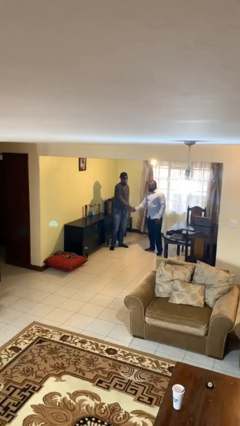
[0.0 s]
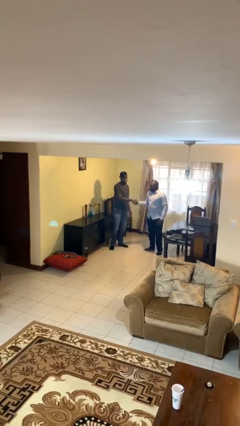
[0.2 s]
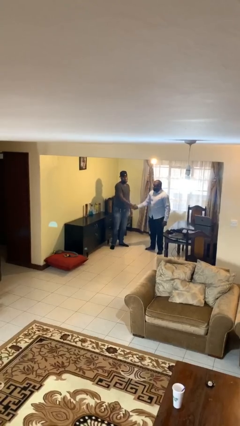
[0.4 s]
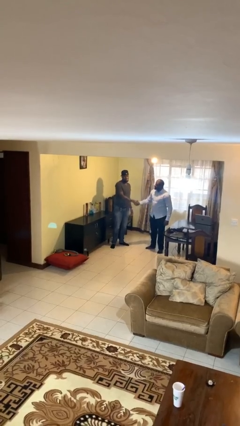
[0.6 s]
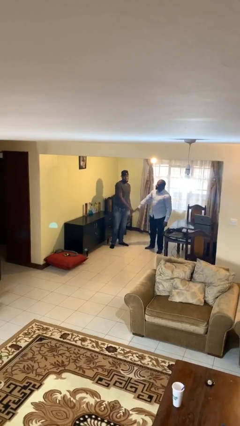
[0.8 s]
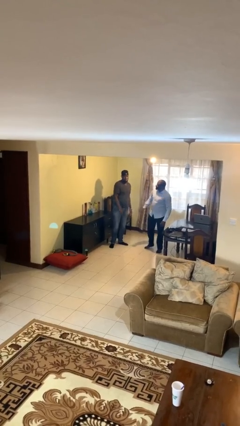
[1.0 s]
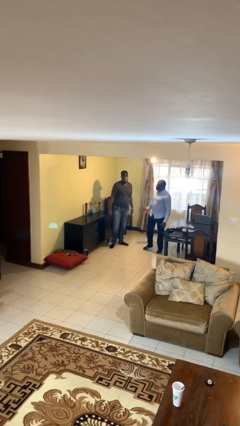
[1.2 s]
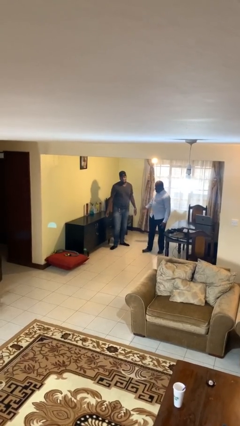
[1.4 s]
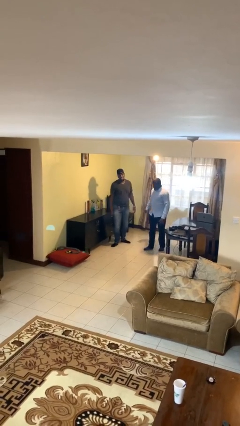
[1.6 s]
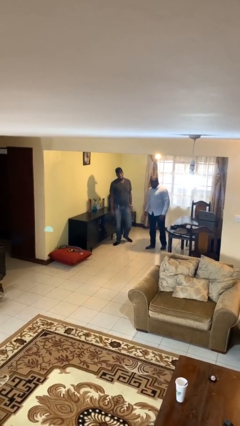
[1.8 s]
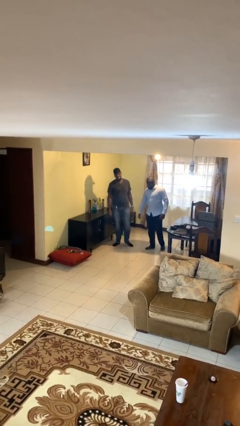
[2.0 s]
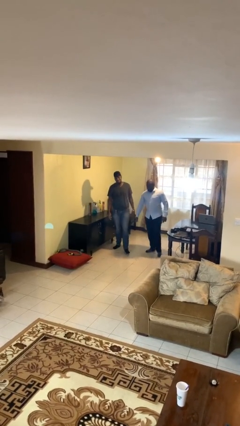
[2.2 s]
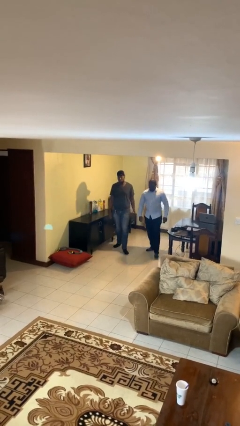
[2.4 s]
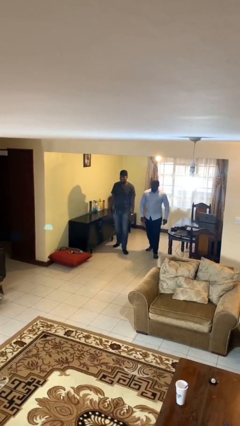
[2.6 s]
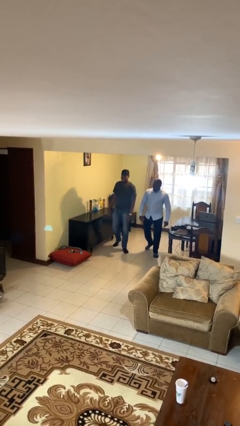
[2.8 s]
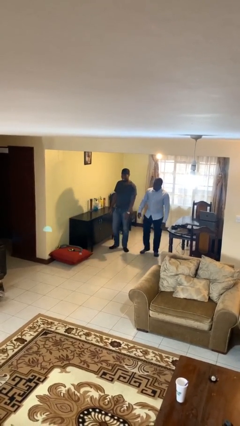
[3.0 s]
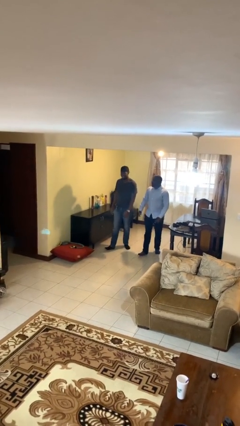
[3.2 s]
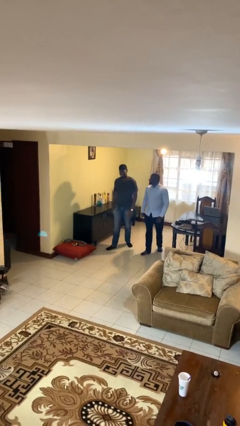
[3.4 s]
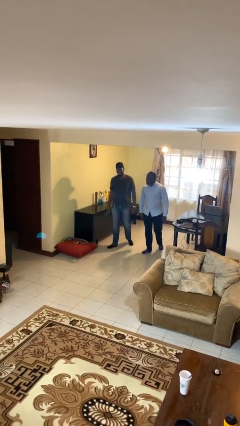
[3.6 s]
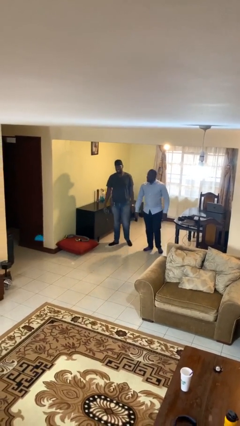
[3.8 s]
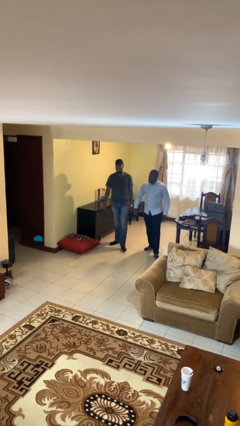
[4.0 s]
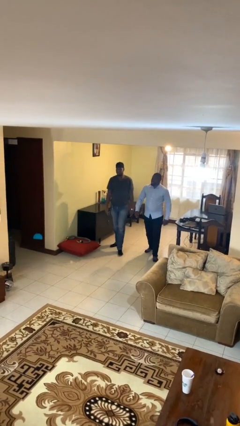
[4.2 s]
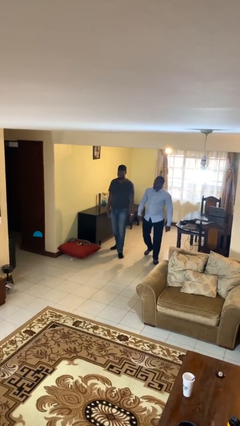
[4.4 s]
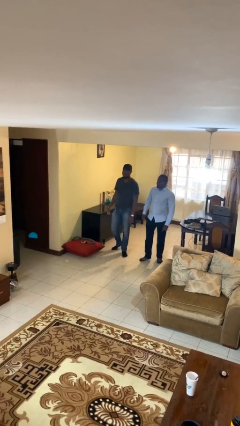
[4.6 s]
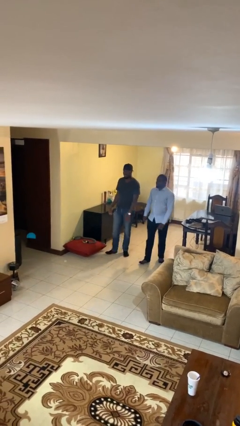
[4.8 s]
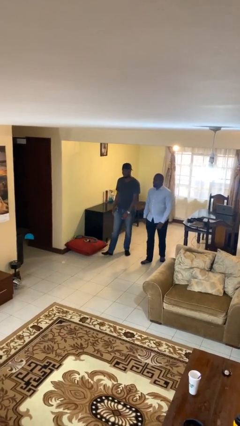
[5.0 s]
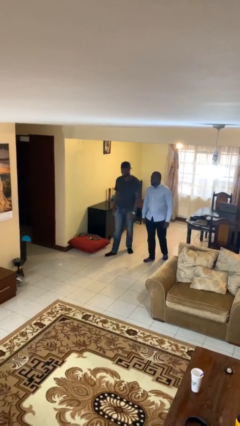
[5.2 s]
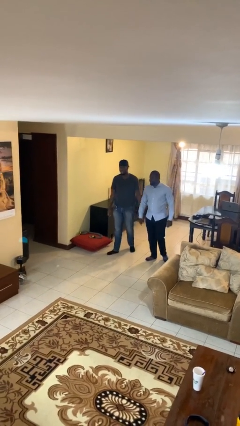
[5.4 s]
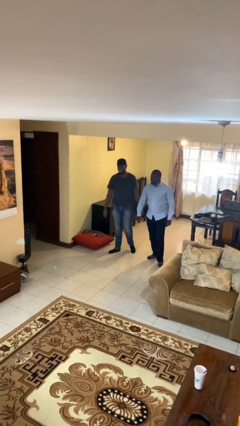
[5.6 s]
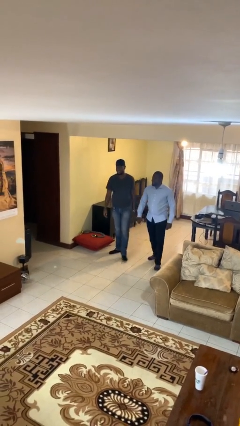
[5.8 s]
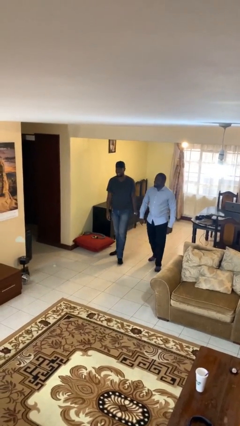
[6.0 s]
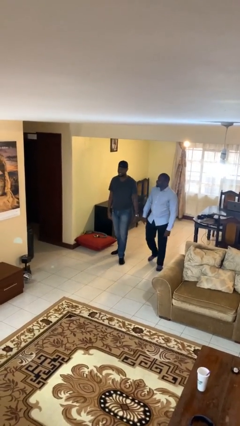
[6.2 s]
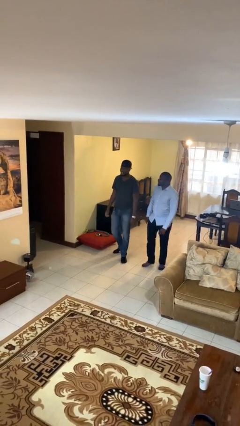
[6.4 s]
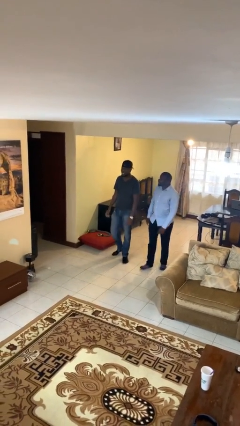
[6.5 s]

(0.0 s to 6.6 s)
person talks to person

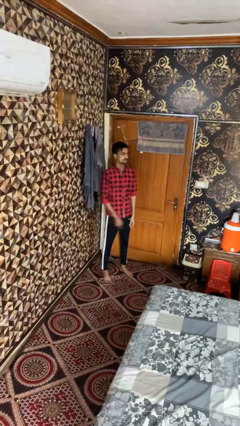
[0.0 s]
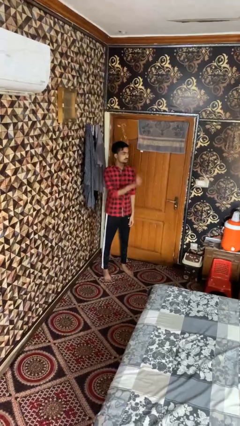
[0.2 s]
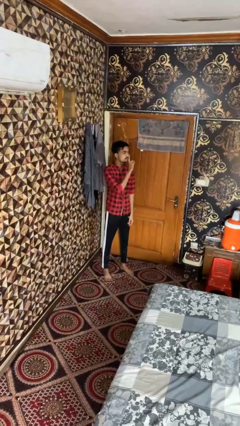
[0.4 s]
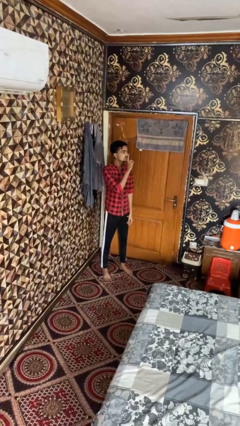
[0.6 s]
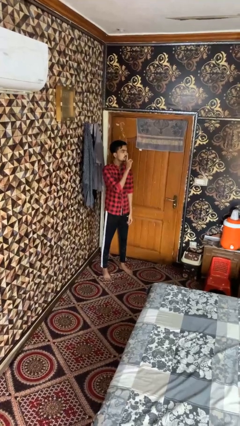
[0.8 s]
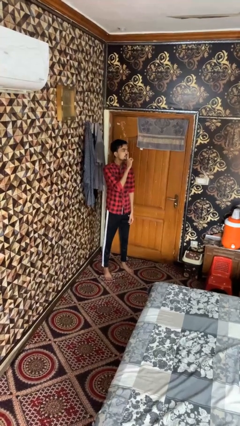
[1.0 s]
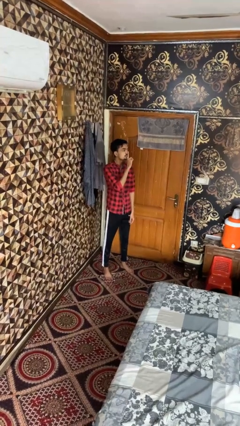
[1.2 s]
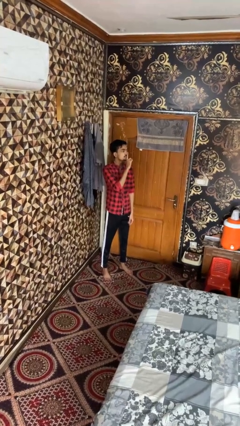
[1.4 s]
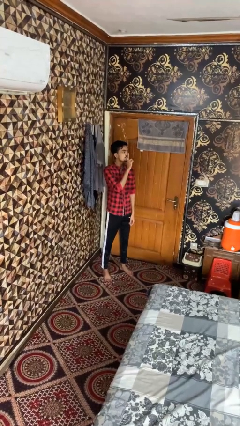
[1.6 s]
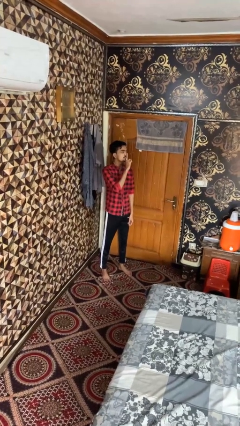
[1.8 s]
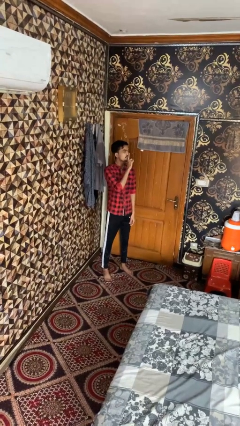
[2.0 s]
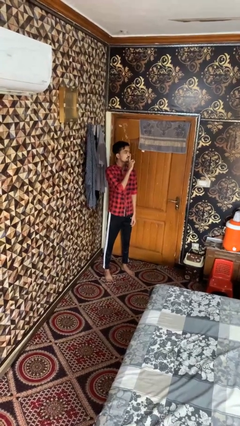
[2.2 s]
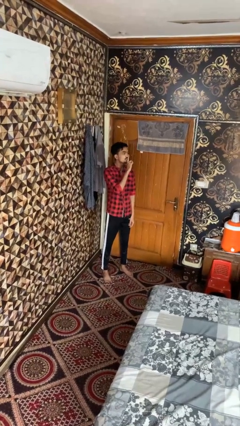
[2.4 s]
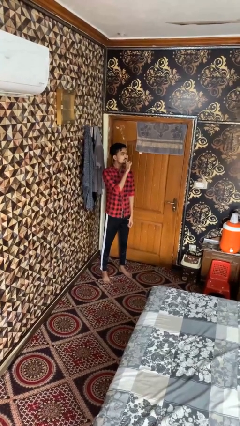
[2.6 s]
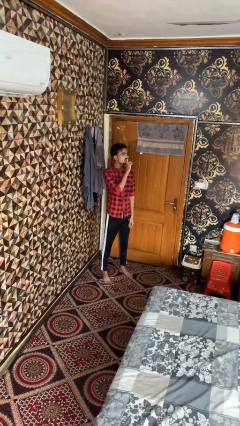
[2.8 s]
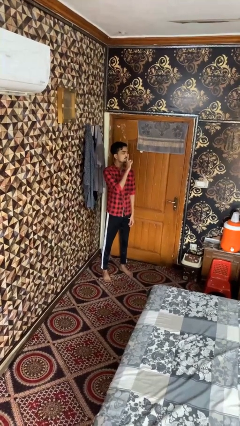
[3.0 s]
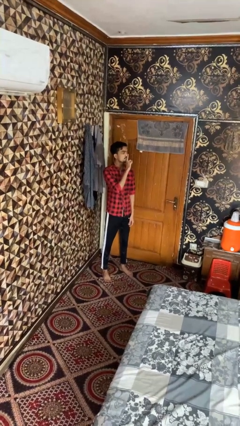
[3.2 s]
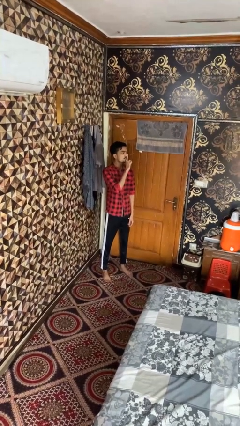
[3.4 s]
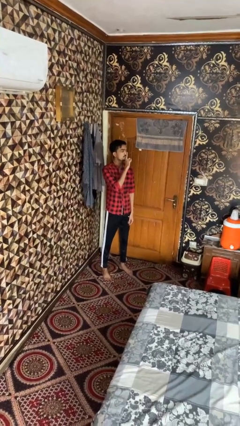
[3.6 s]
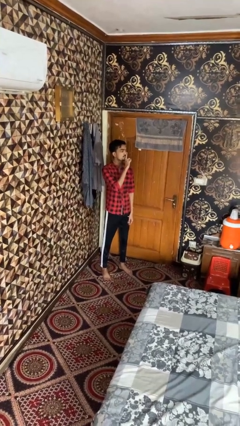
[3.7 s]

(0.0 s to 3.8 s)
person gestures be quiet

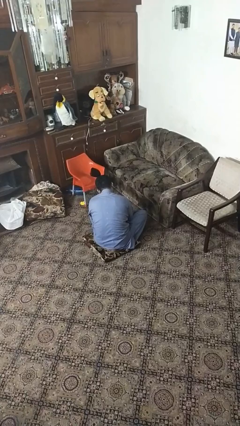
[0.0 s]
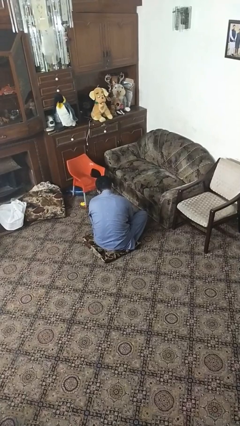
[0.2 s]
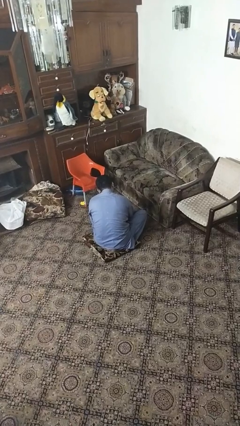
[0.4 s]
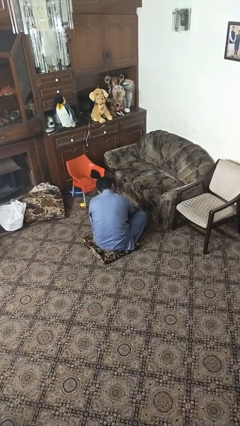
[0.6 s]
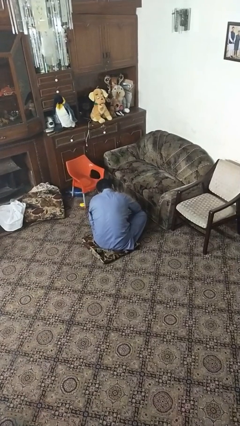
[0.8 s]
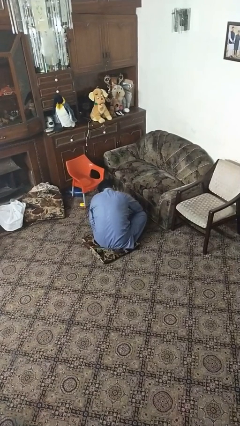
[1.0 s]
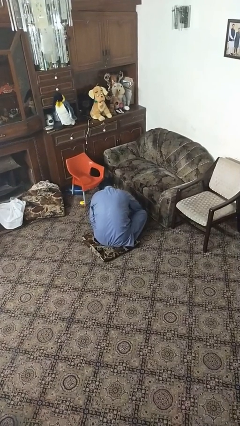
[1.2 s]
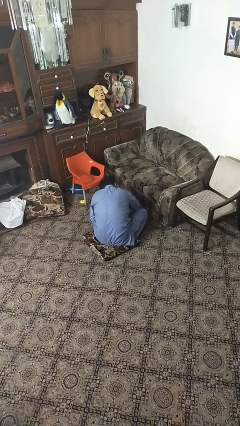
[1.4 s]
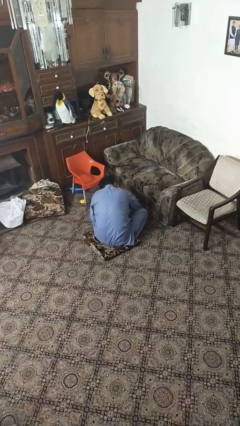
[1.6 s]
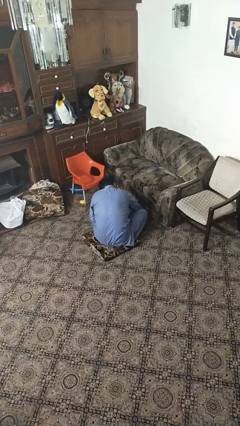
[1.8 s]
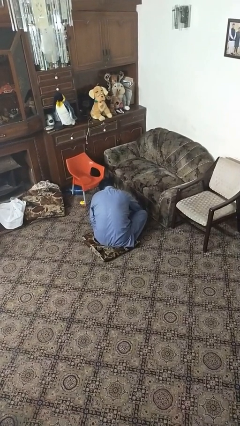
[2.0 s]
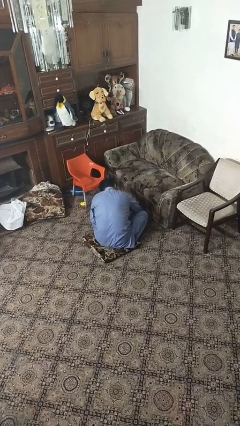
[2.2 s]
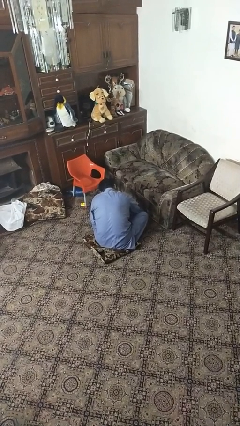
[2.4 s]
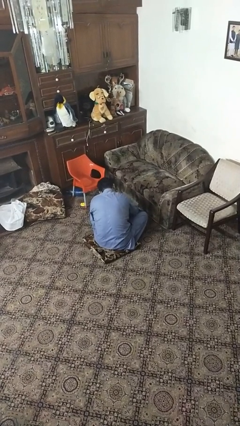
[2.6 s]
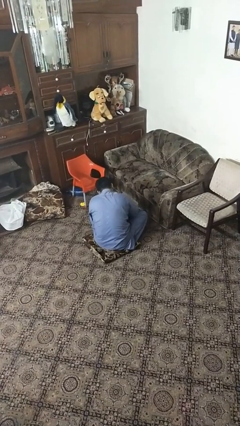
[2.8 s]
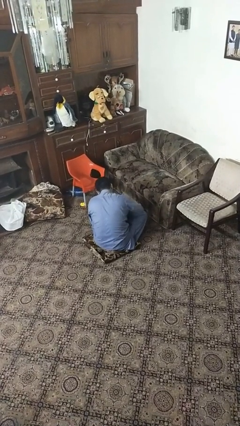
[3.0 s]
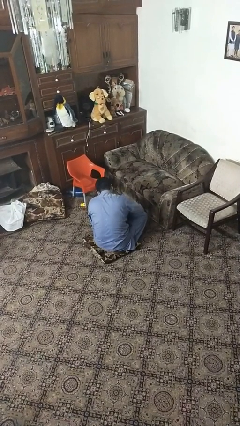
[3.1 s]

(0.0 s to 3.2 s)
person searches under couch

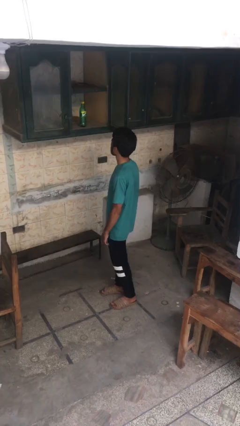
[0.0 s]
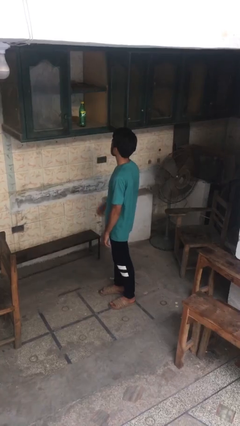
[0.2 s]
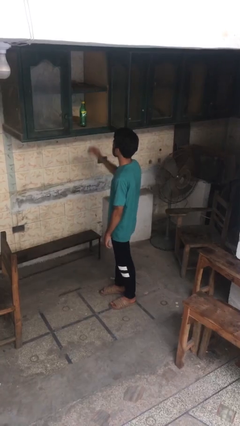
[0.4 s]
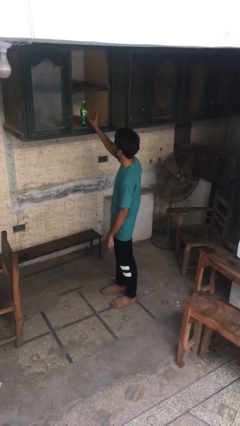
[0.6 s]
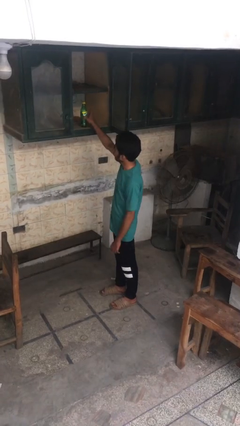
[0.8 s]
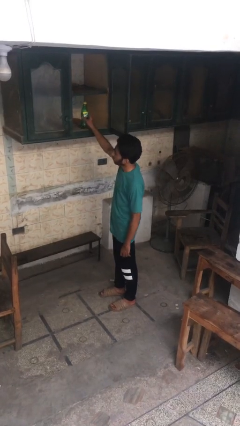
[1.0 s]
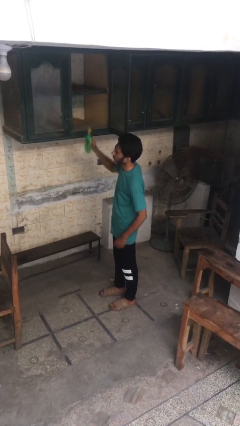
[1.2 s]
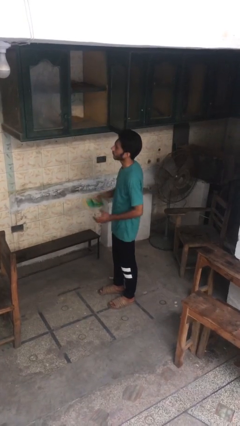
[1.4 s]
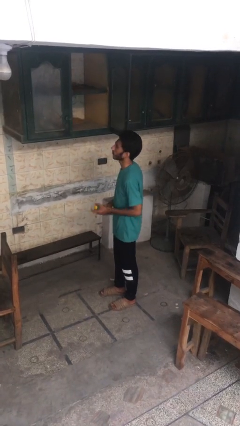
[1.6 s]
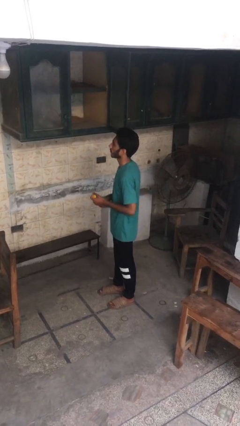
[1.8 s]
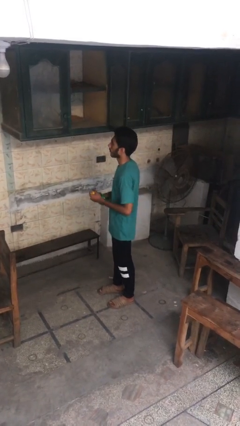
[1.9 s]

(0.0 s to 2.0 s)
person takes object from cabinet

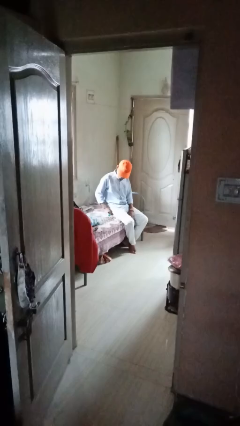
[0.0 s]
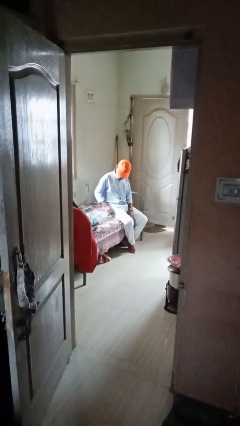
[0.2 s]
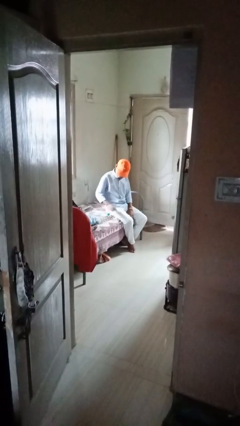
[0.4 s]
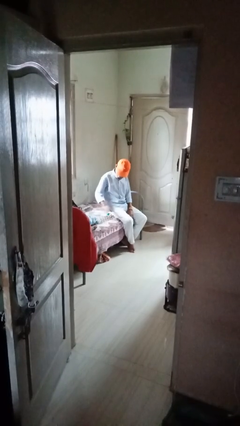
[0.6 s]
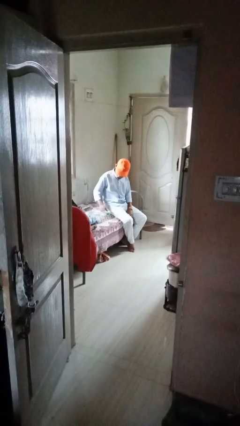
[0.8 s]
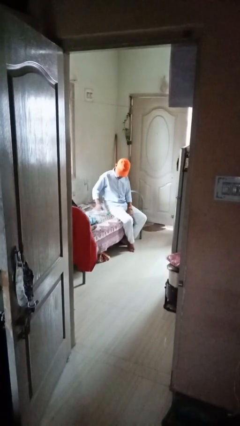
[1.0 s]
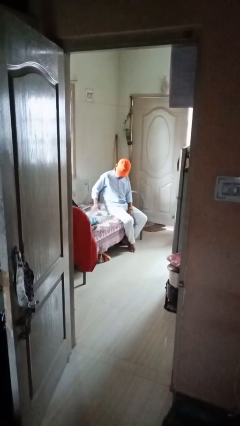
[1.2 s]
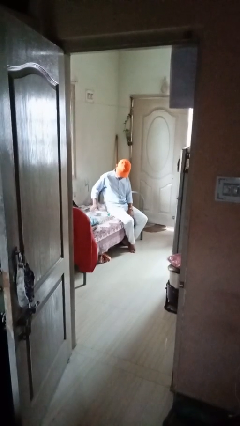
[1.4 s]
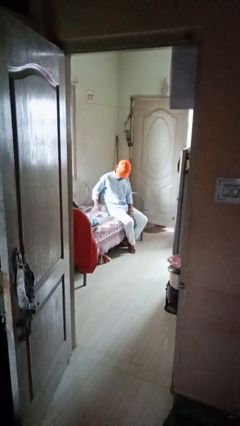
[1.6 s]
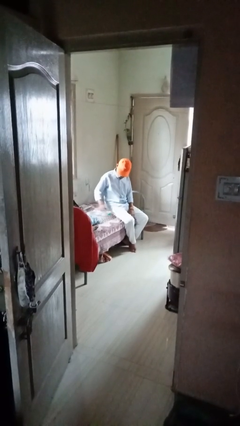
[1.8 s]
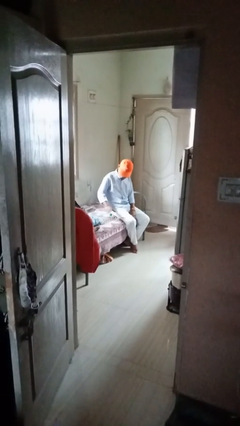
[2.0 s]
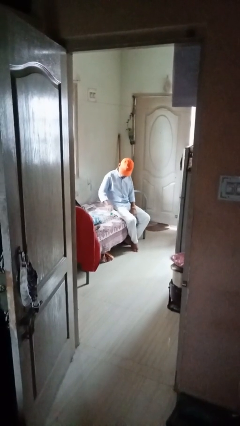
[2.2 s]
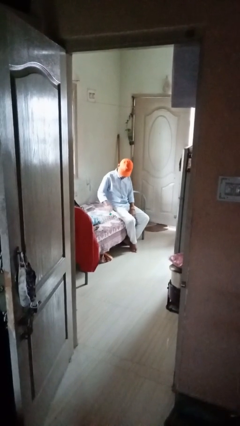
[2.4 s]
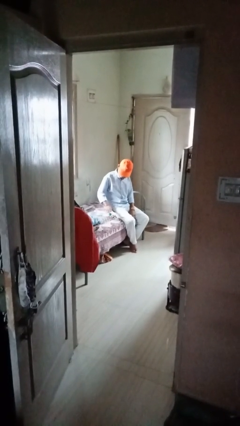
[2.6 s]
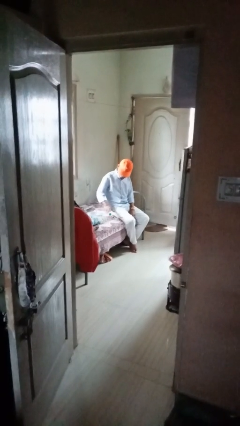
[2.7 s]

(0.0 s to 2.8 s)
person waves hand over object
